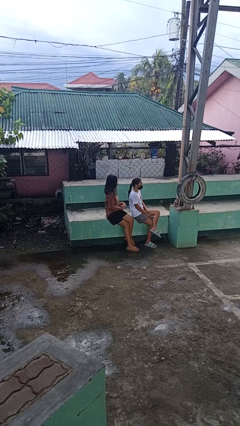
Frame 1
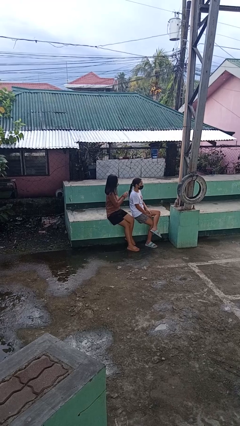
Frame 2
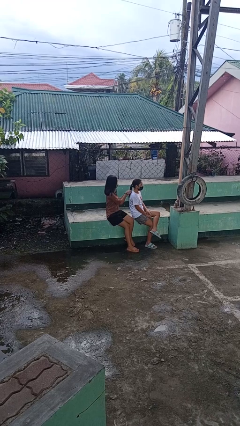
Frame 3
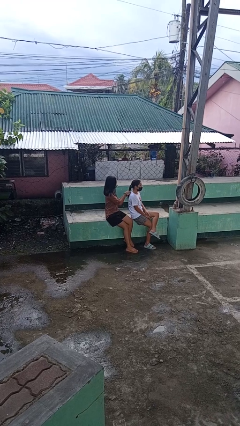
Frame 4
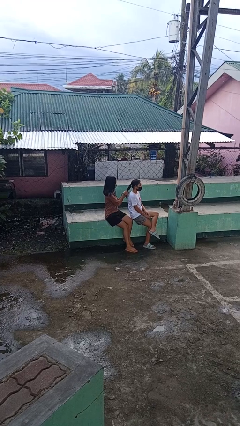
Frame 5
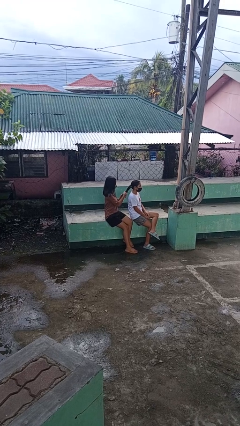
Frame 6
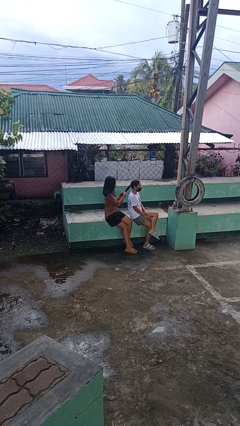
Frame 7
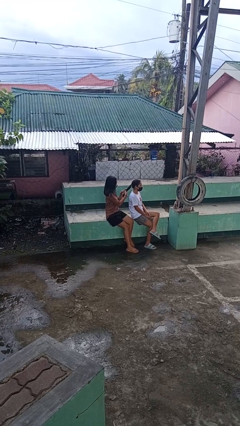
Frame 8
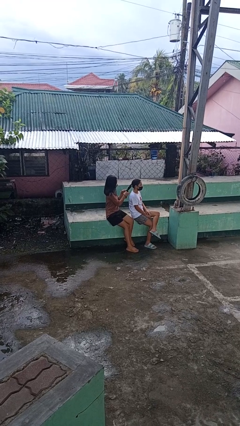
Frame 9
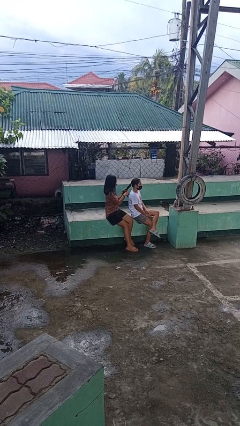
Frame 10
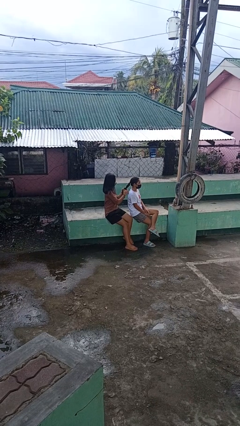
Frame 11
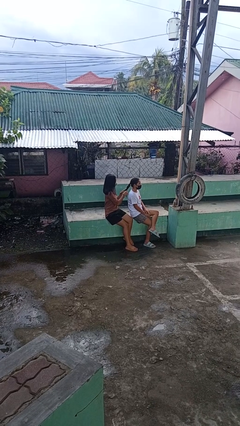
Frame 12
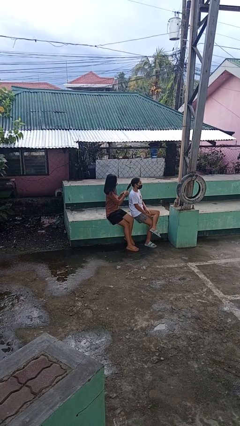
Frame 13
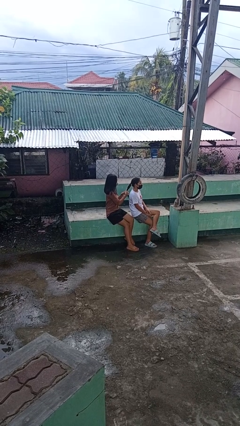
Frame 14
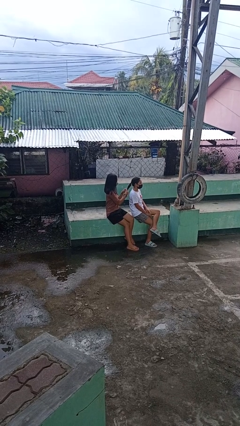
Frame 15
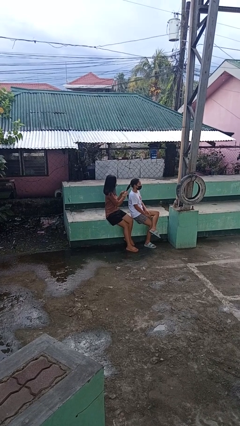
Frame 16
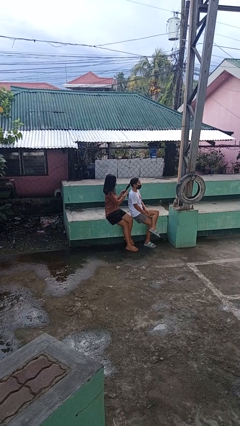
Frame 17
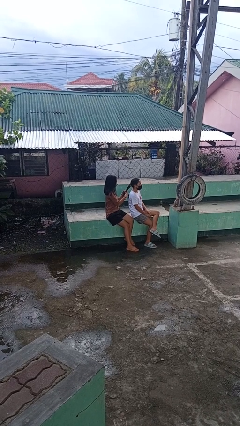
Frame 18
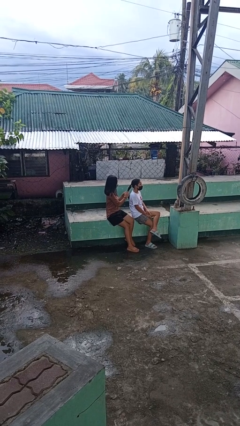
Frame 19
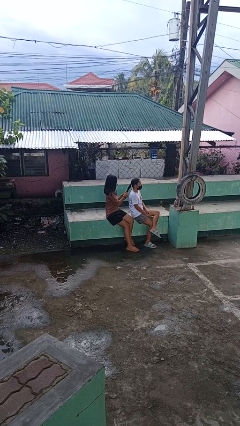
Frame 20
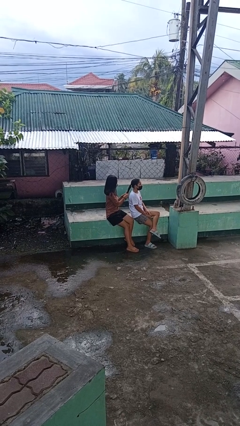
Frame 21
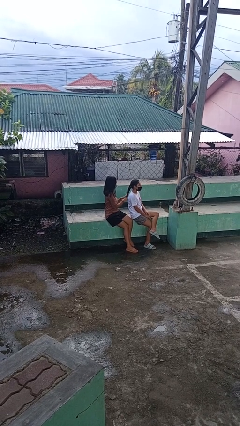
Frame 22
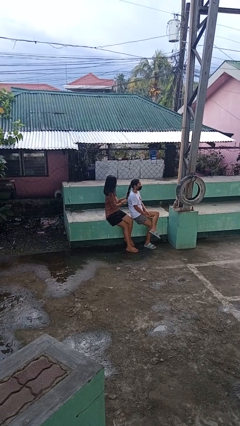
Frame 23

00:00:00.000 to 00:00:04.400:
person braids hair of person

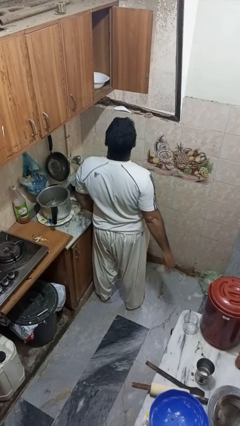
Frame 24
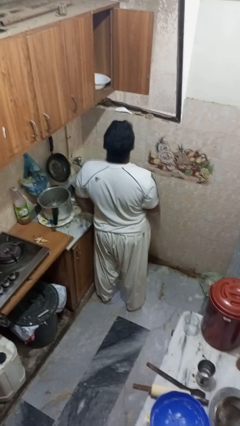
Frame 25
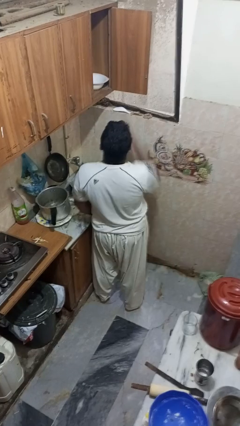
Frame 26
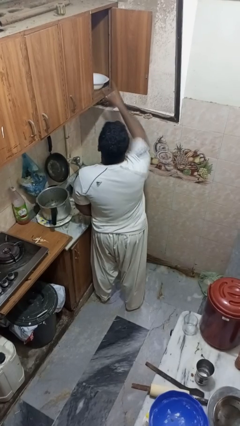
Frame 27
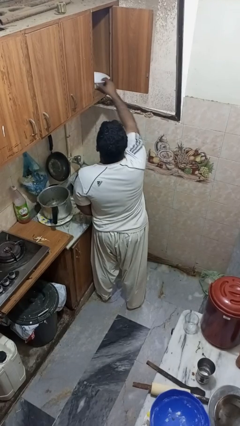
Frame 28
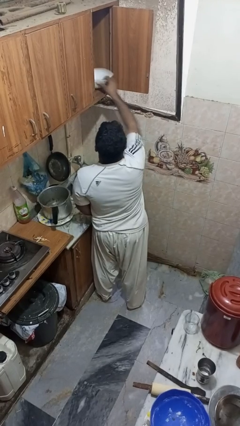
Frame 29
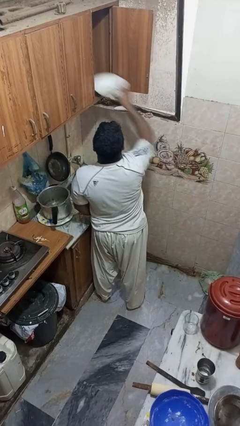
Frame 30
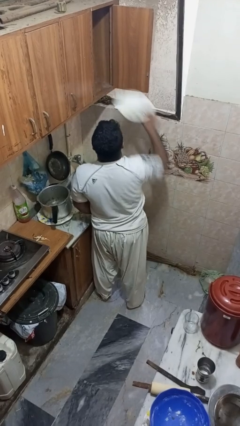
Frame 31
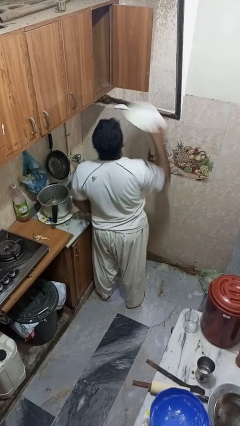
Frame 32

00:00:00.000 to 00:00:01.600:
person takes object from cabinet

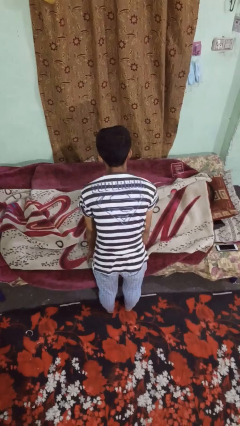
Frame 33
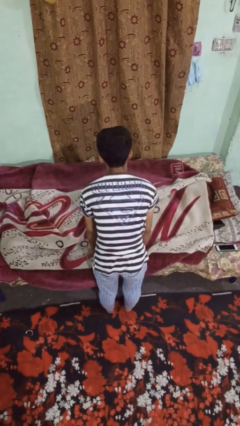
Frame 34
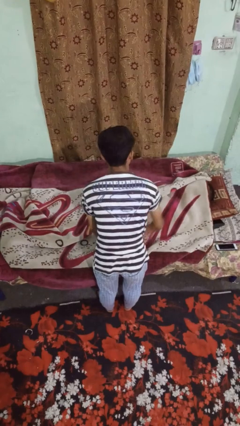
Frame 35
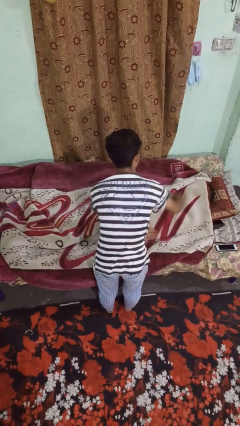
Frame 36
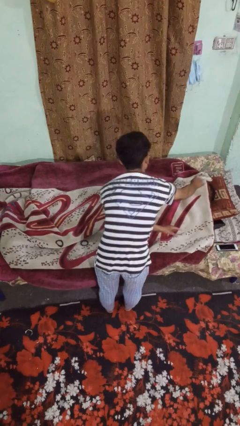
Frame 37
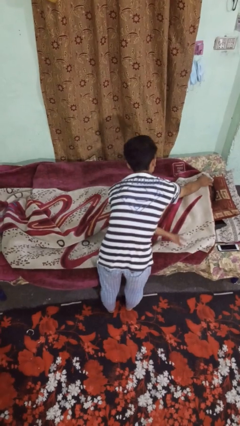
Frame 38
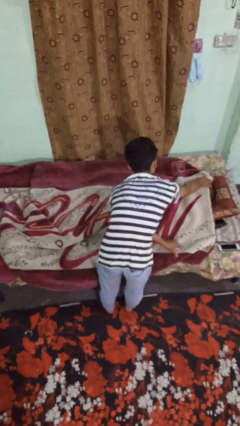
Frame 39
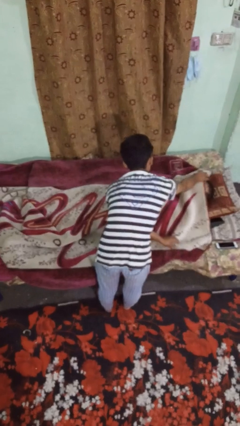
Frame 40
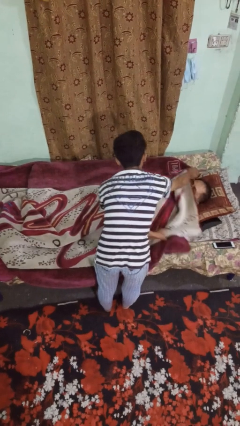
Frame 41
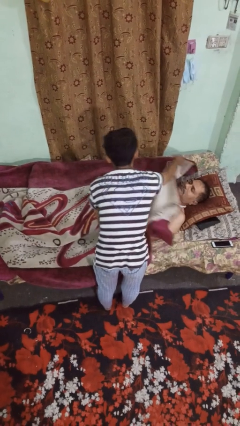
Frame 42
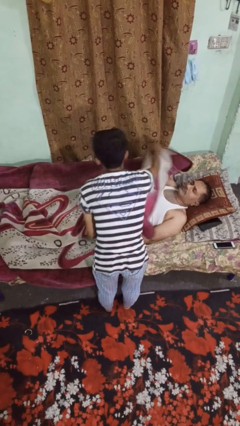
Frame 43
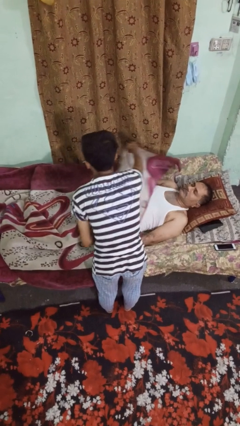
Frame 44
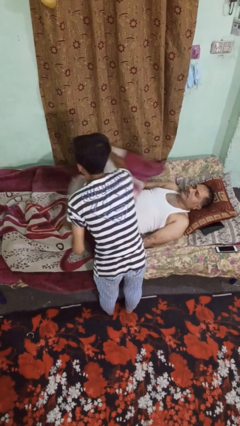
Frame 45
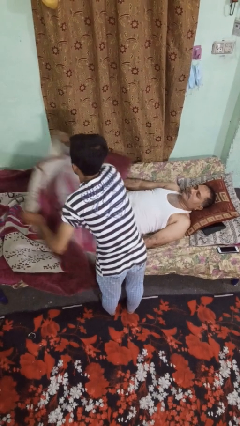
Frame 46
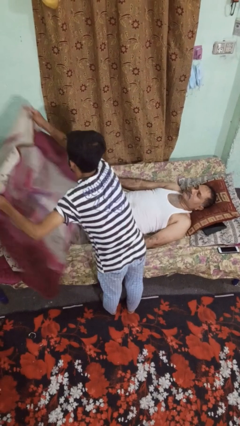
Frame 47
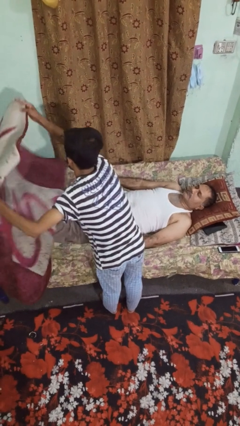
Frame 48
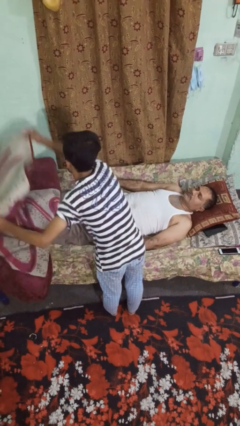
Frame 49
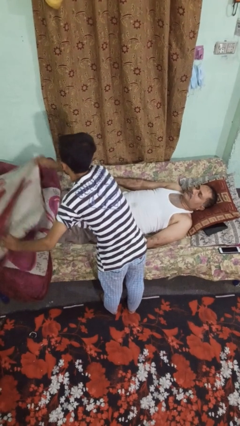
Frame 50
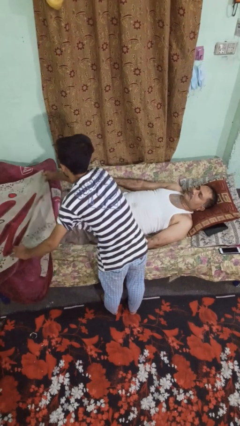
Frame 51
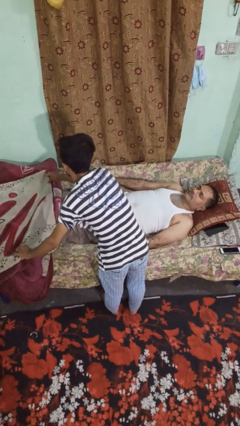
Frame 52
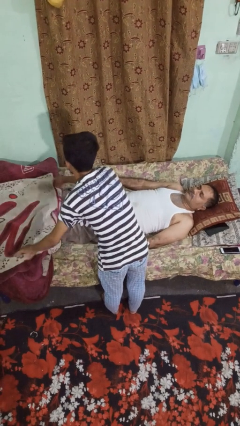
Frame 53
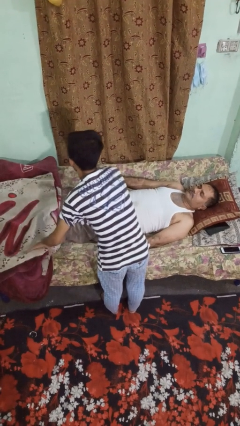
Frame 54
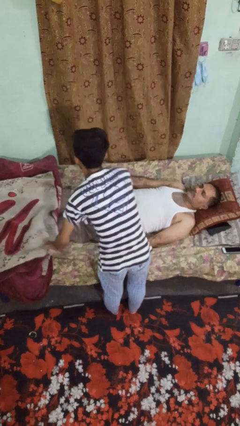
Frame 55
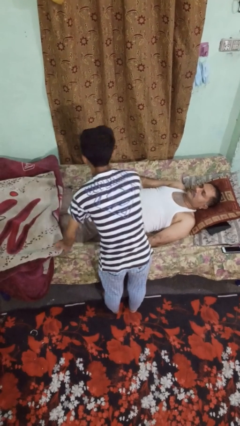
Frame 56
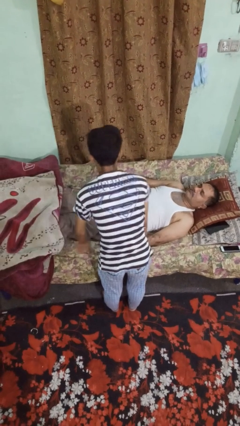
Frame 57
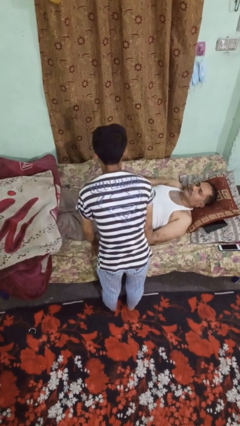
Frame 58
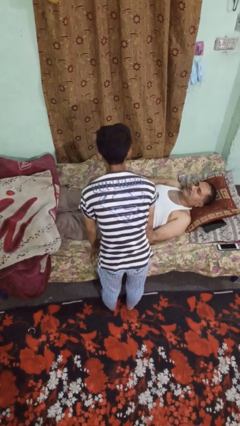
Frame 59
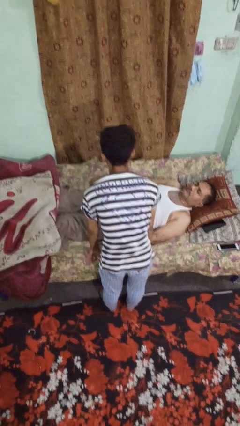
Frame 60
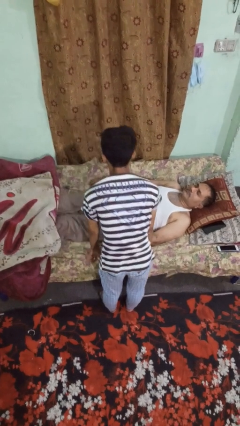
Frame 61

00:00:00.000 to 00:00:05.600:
person uncovers friend with blanket

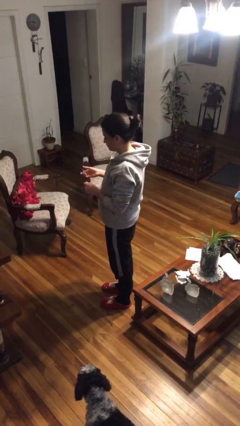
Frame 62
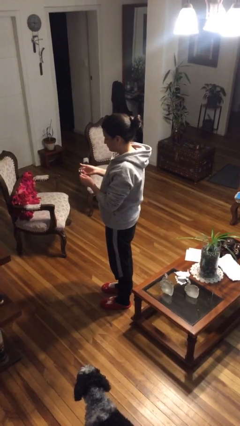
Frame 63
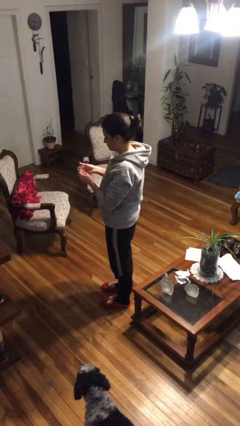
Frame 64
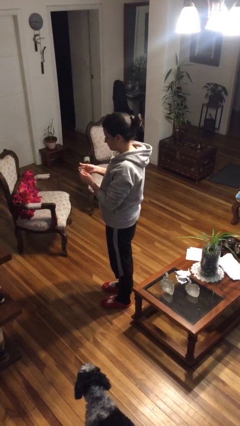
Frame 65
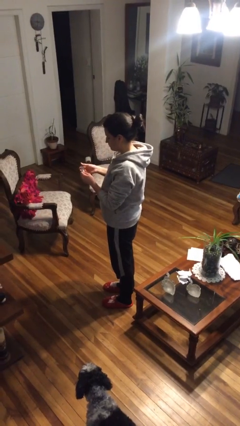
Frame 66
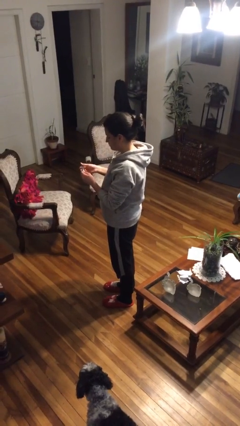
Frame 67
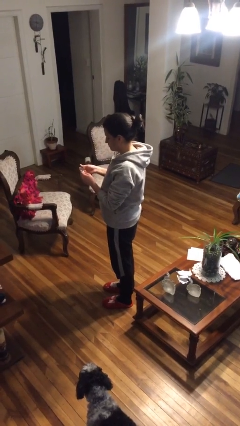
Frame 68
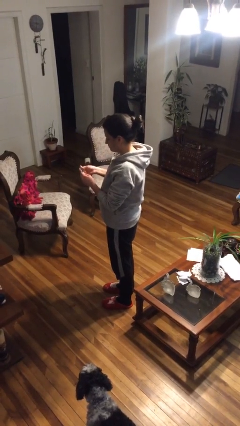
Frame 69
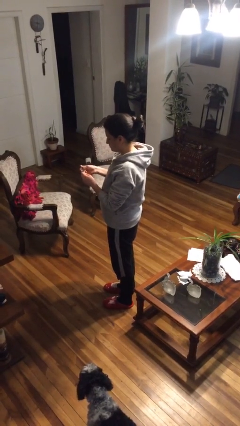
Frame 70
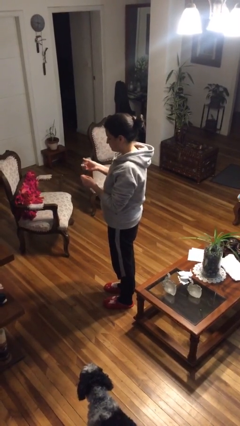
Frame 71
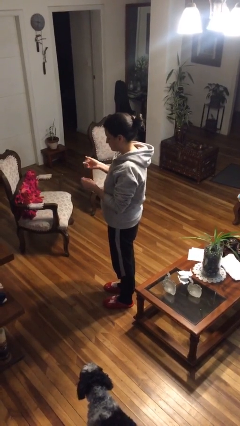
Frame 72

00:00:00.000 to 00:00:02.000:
person clips fingernails

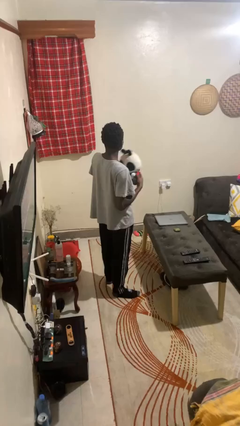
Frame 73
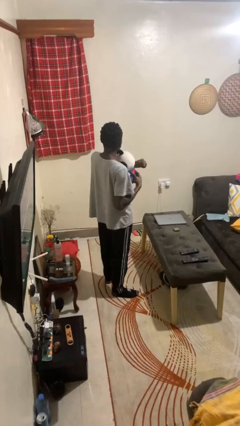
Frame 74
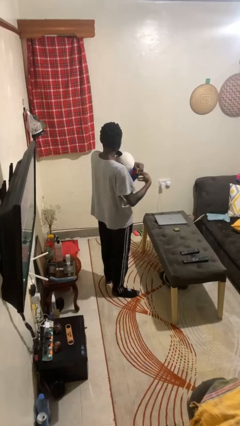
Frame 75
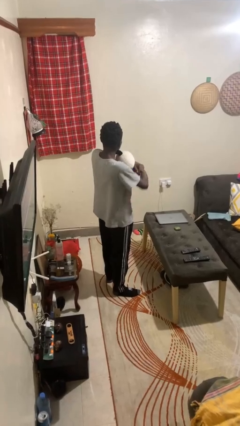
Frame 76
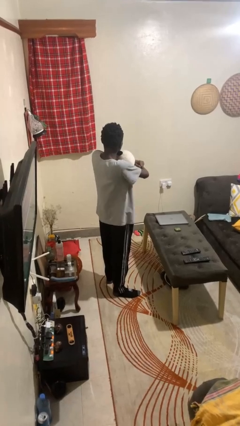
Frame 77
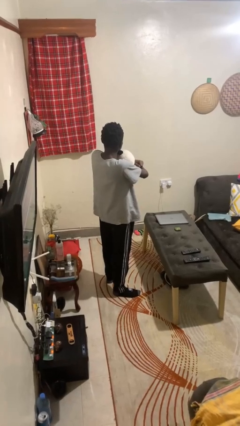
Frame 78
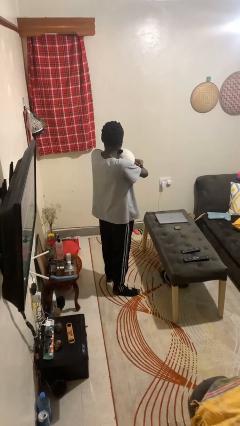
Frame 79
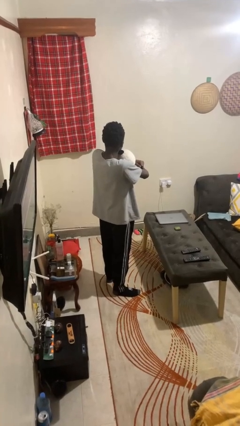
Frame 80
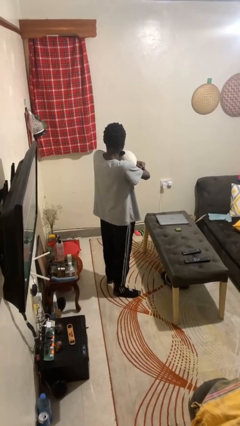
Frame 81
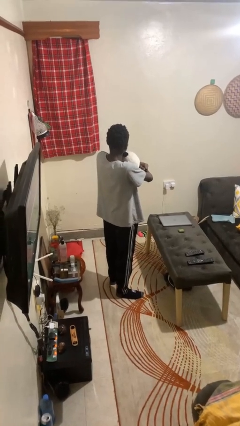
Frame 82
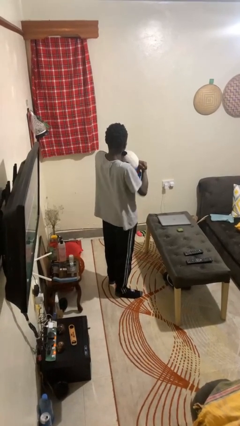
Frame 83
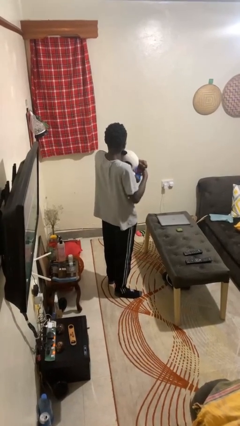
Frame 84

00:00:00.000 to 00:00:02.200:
person hugs stuffed animal

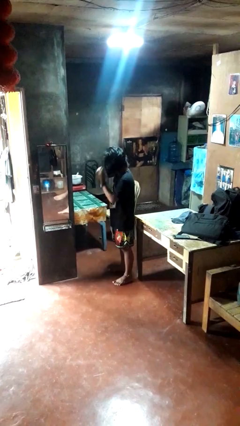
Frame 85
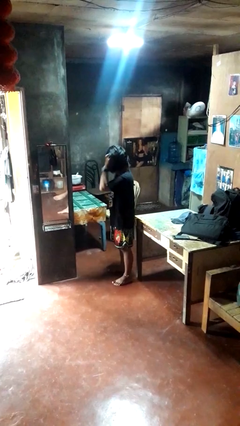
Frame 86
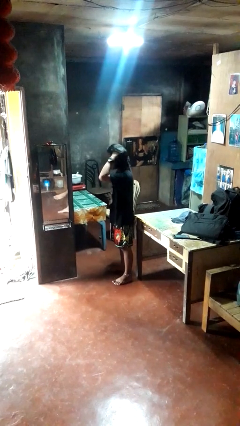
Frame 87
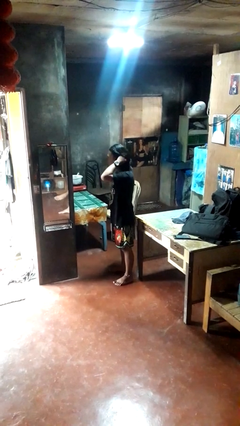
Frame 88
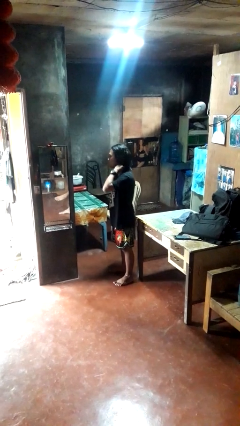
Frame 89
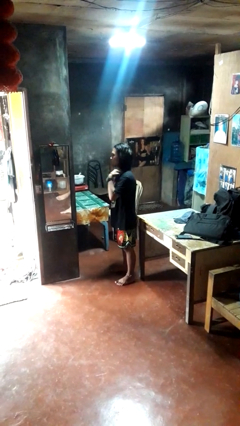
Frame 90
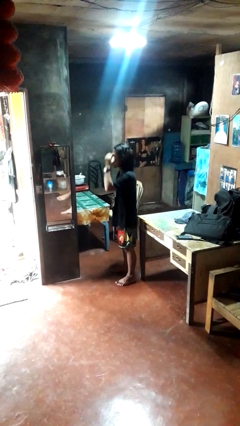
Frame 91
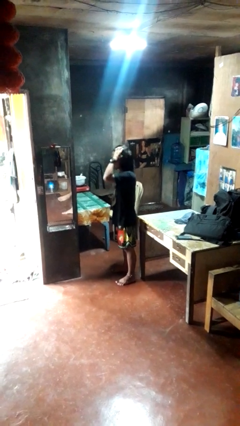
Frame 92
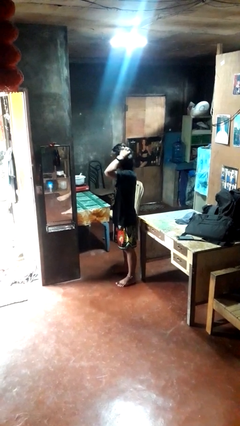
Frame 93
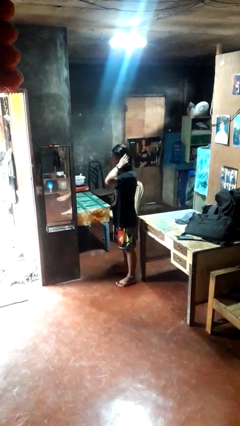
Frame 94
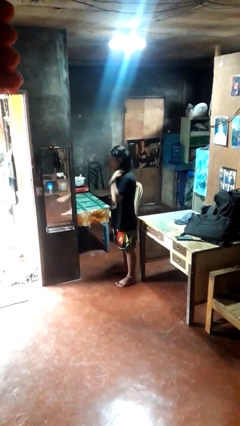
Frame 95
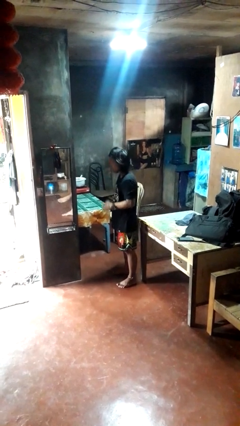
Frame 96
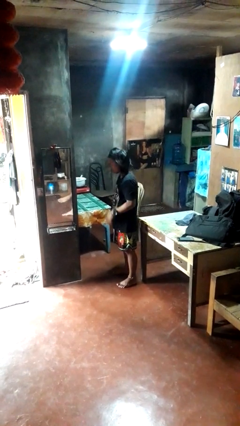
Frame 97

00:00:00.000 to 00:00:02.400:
person strokes hair
